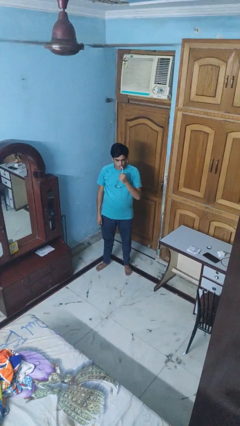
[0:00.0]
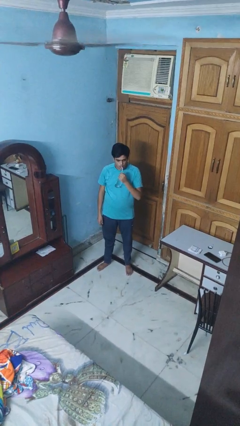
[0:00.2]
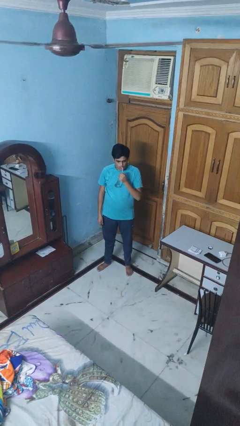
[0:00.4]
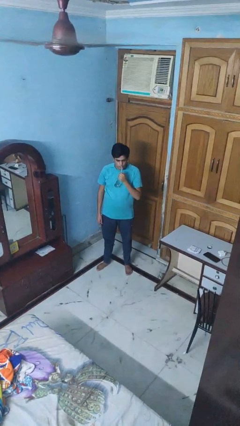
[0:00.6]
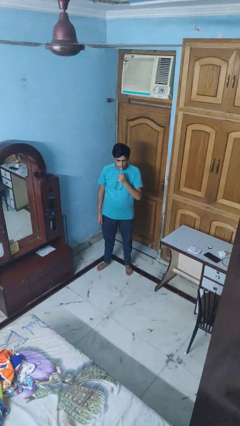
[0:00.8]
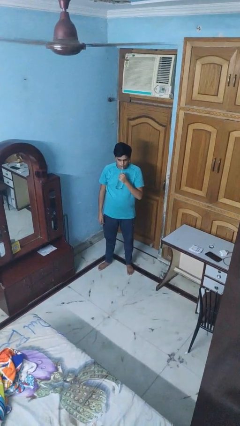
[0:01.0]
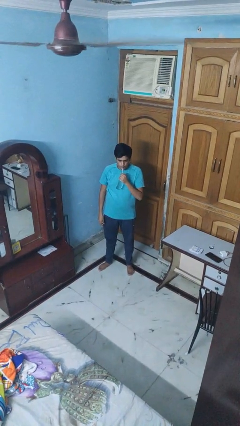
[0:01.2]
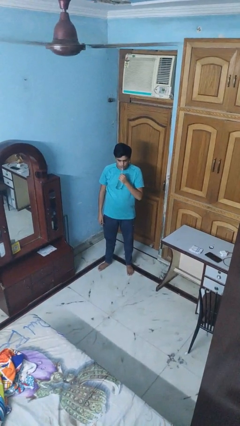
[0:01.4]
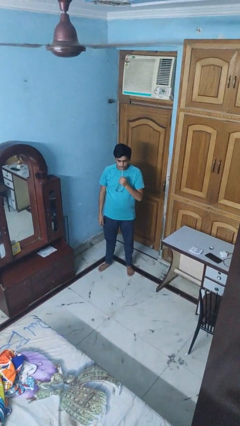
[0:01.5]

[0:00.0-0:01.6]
person drinks from straw

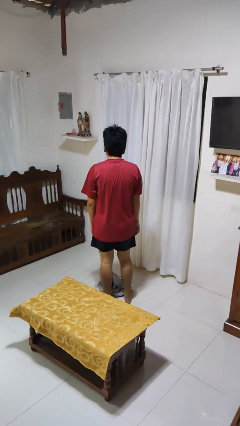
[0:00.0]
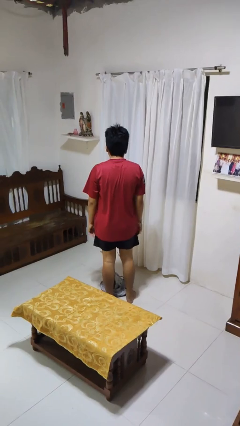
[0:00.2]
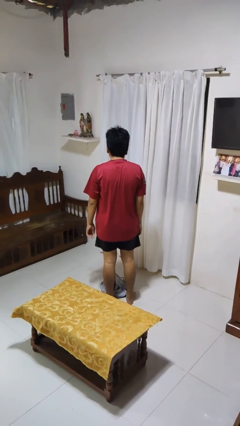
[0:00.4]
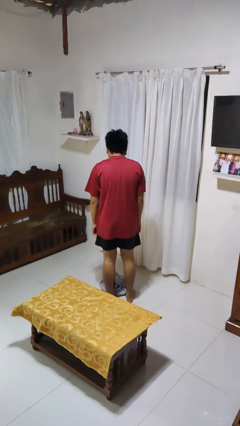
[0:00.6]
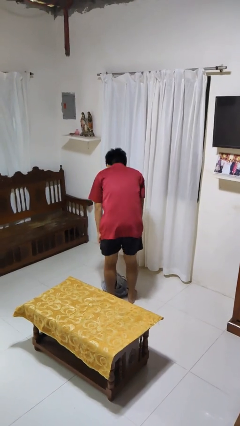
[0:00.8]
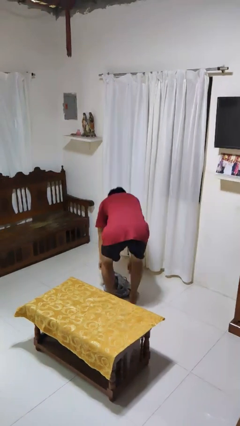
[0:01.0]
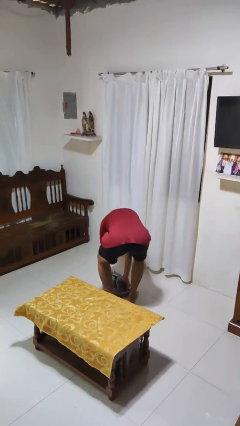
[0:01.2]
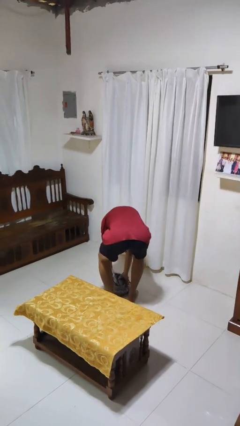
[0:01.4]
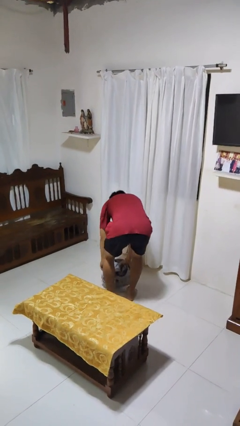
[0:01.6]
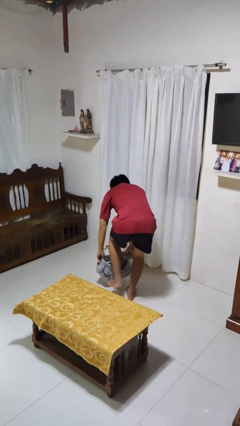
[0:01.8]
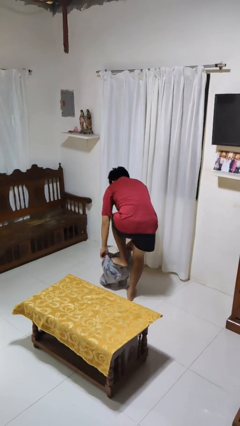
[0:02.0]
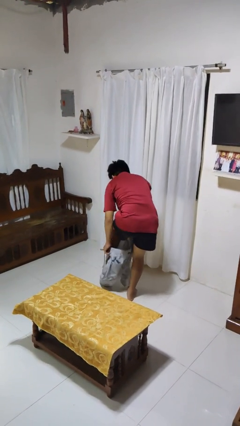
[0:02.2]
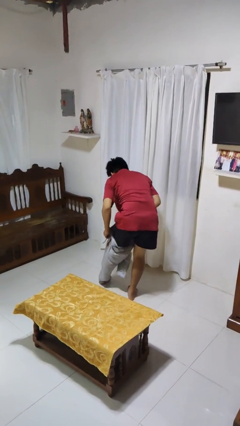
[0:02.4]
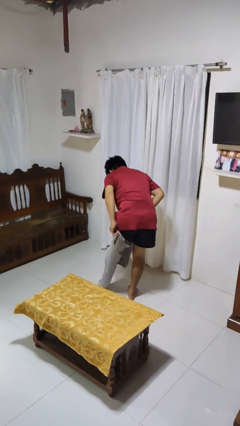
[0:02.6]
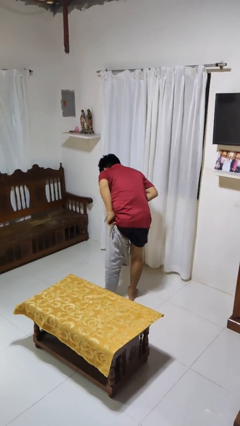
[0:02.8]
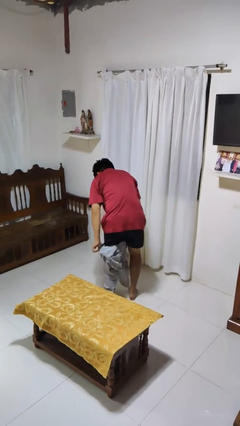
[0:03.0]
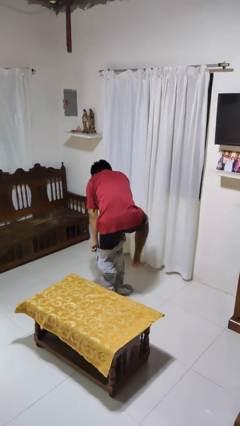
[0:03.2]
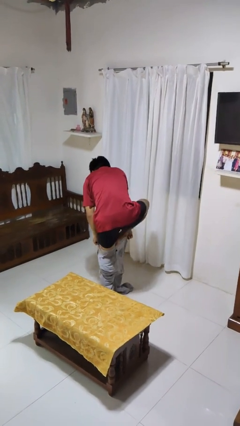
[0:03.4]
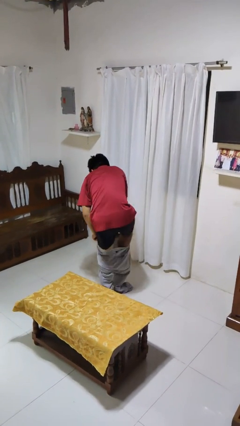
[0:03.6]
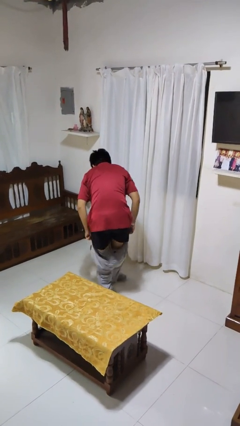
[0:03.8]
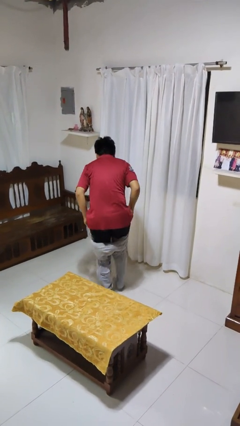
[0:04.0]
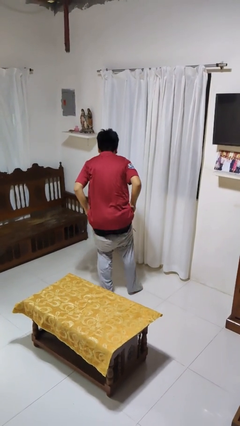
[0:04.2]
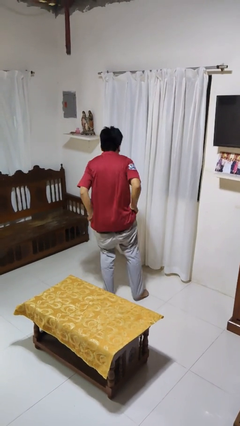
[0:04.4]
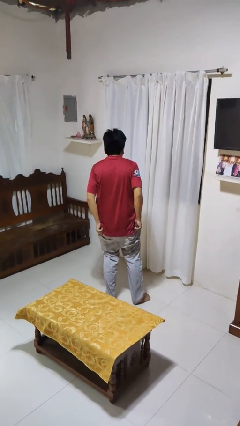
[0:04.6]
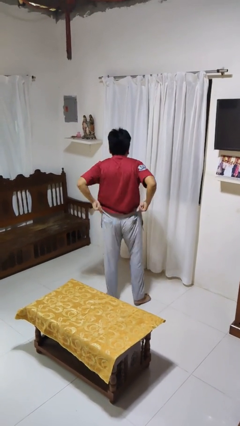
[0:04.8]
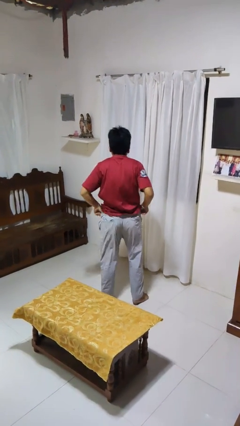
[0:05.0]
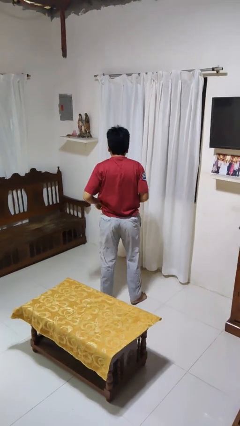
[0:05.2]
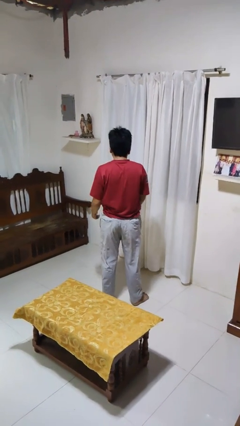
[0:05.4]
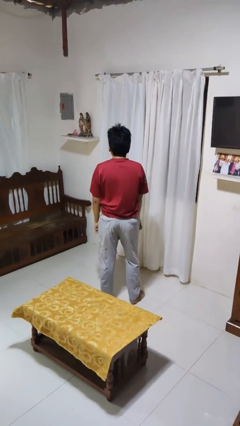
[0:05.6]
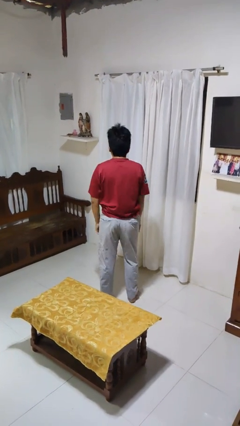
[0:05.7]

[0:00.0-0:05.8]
person puts on pants

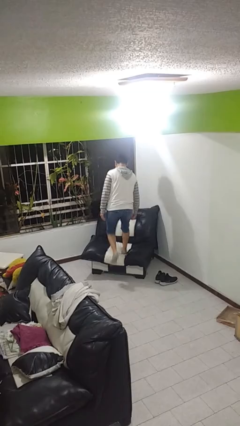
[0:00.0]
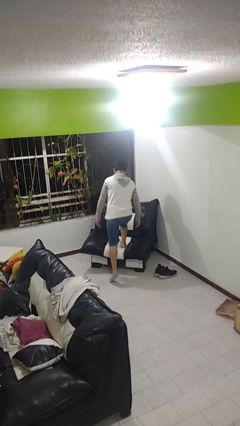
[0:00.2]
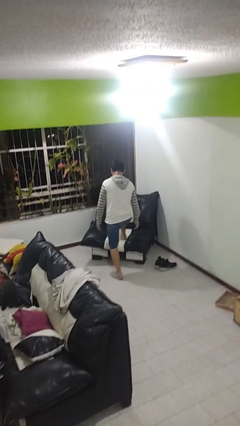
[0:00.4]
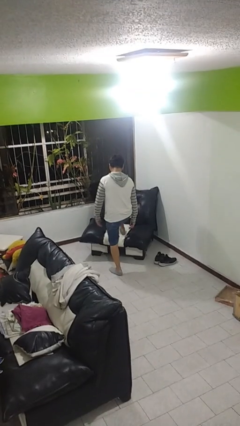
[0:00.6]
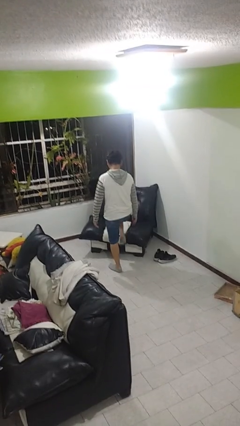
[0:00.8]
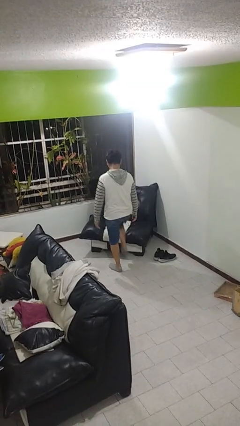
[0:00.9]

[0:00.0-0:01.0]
person climbs off couch

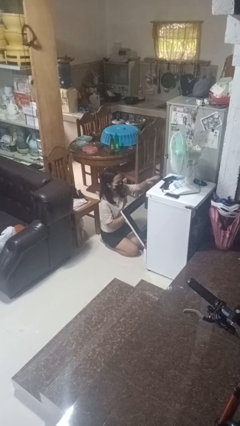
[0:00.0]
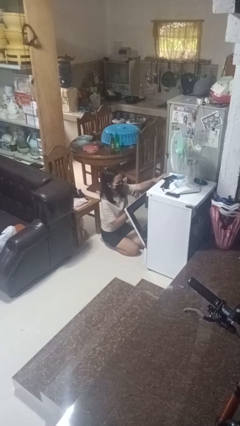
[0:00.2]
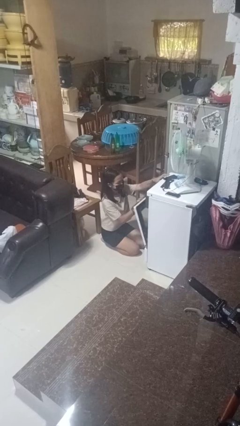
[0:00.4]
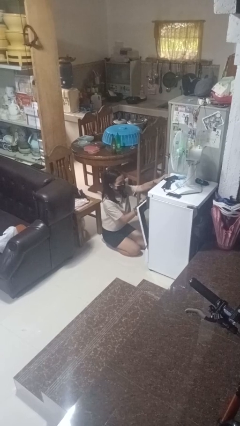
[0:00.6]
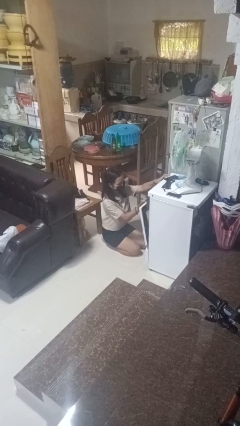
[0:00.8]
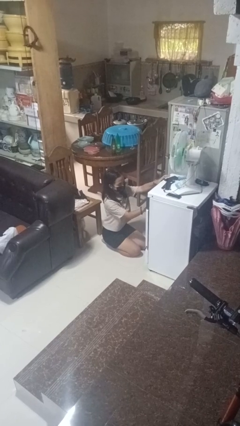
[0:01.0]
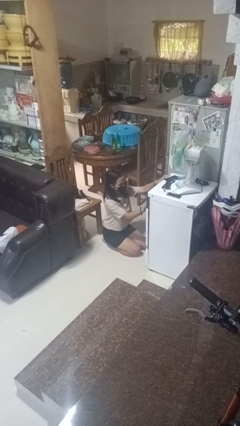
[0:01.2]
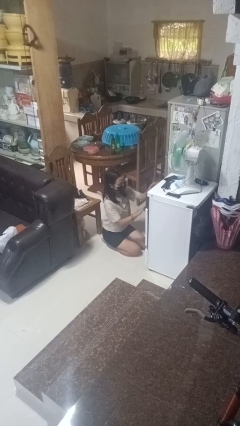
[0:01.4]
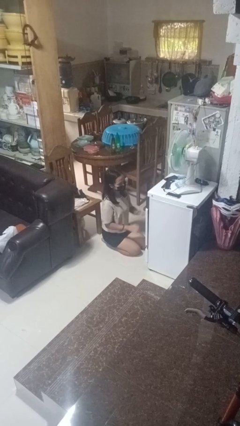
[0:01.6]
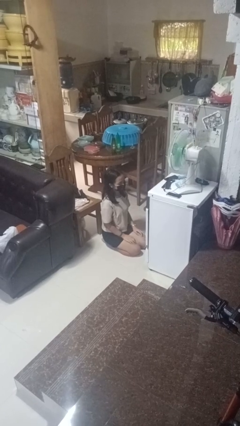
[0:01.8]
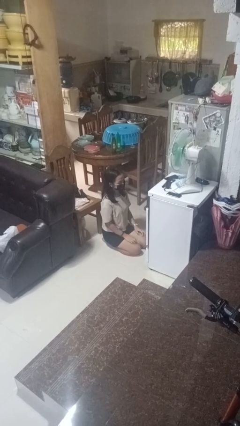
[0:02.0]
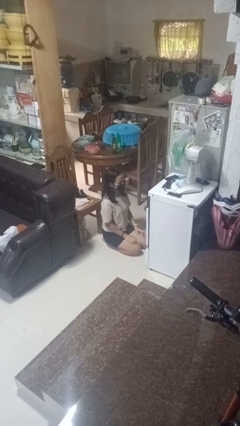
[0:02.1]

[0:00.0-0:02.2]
person closes oven door

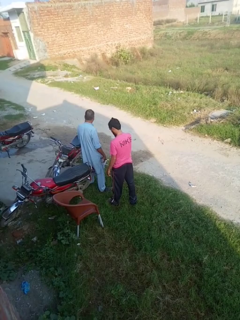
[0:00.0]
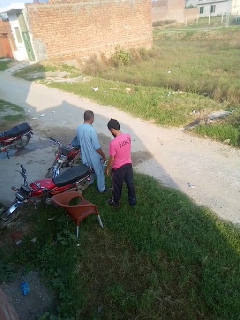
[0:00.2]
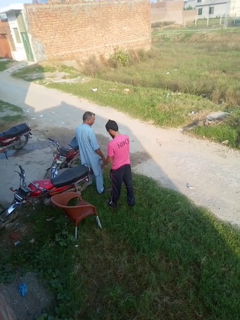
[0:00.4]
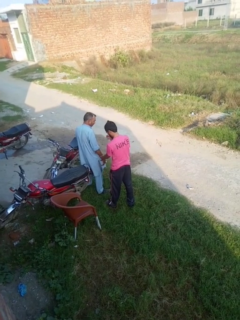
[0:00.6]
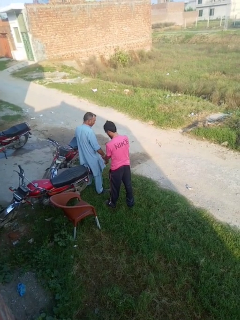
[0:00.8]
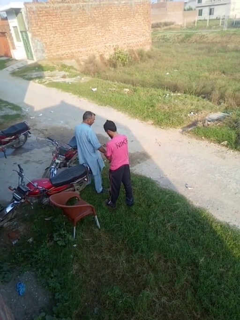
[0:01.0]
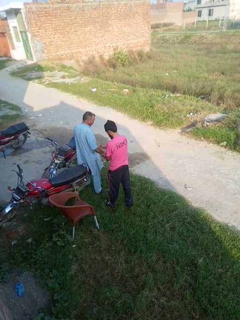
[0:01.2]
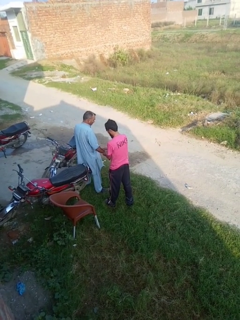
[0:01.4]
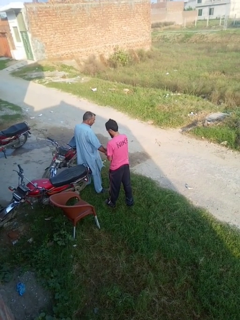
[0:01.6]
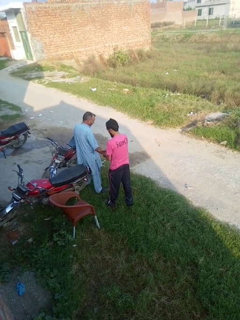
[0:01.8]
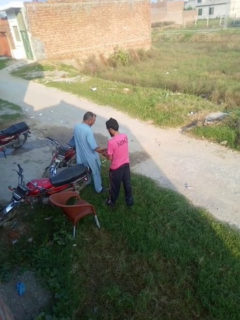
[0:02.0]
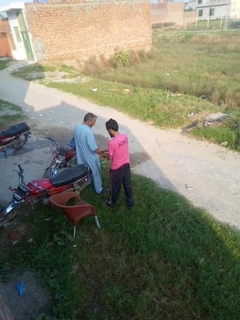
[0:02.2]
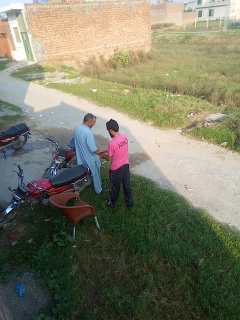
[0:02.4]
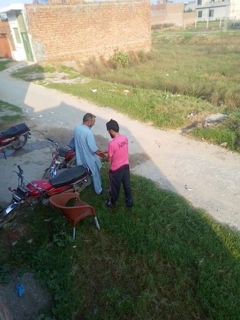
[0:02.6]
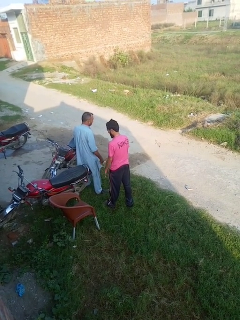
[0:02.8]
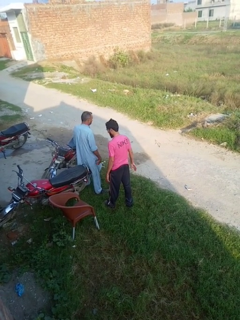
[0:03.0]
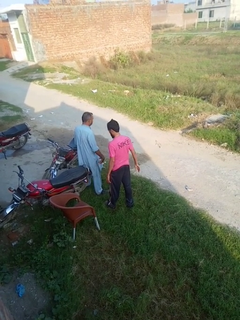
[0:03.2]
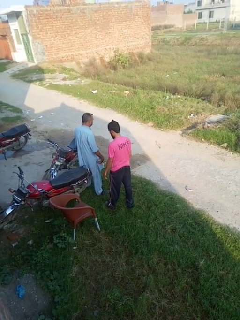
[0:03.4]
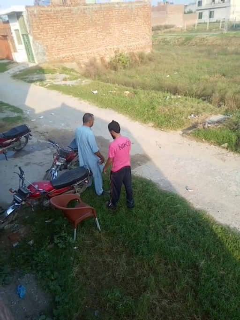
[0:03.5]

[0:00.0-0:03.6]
person grabs person by forearm

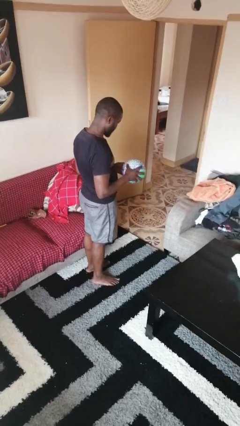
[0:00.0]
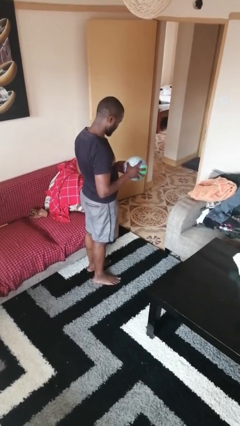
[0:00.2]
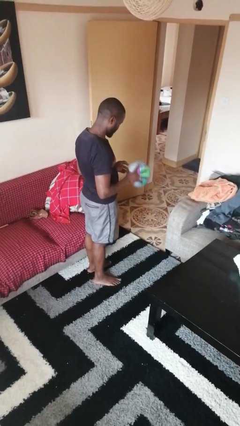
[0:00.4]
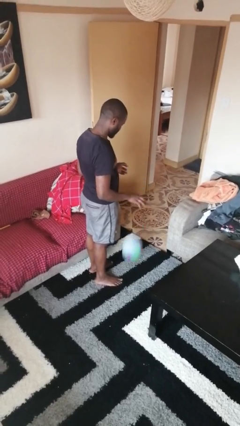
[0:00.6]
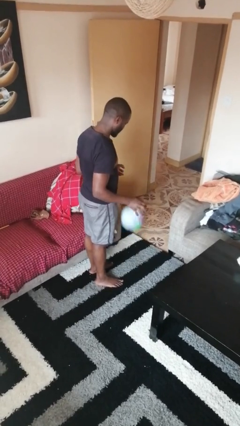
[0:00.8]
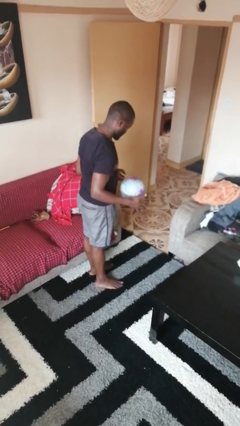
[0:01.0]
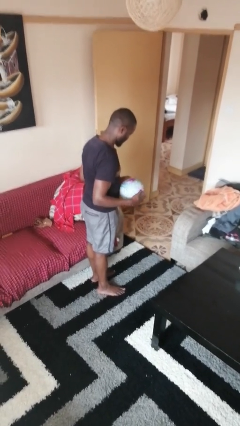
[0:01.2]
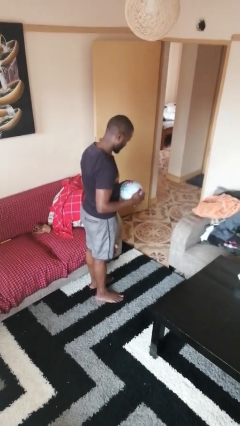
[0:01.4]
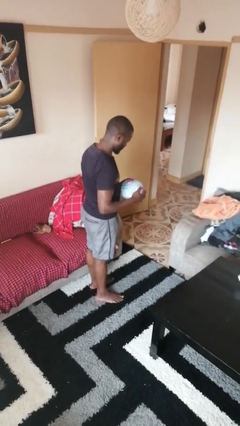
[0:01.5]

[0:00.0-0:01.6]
person bounces ball on floor

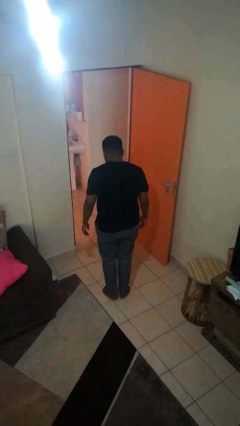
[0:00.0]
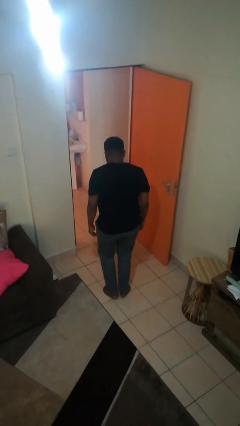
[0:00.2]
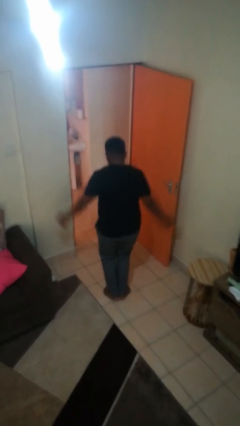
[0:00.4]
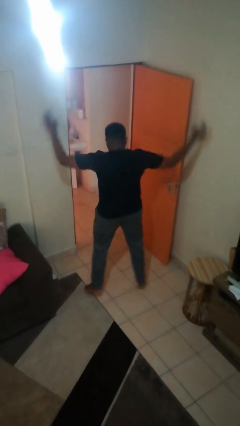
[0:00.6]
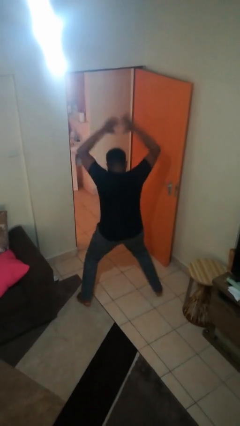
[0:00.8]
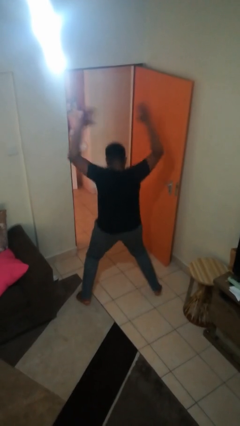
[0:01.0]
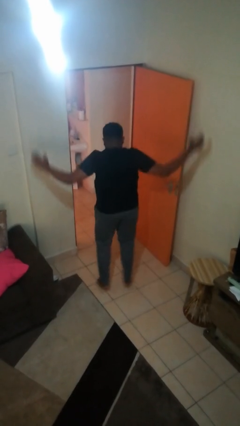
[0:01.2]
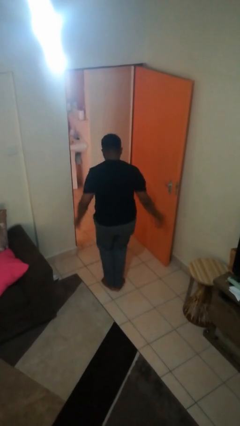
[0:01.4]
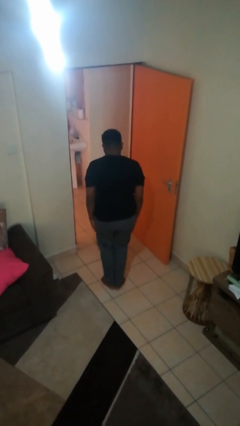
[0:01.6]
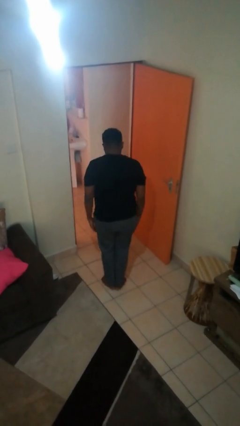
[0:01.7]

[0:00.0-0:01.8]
person exercises with jumping jacks
